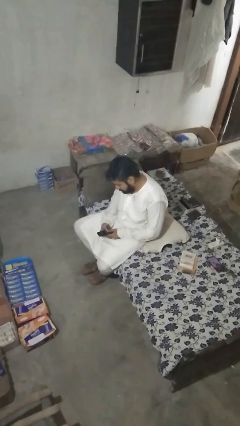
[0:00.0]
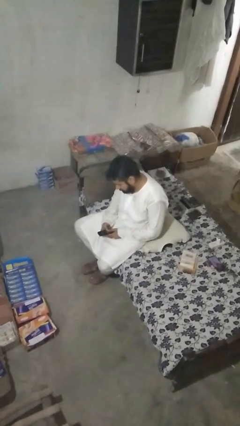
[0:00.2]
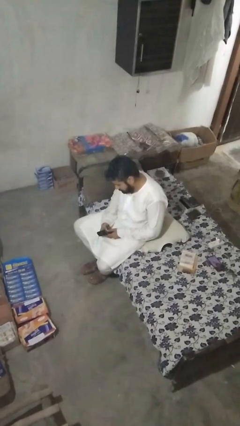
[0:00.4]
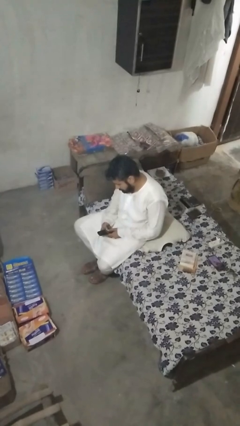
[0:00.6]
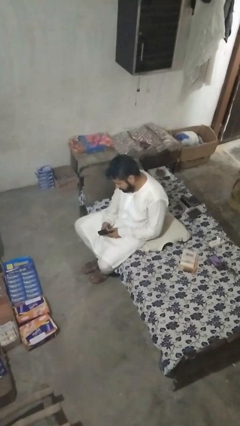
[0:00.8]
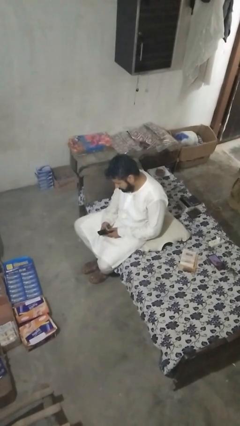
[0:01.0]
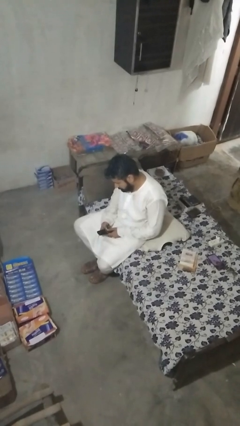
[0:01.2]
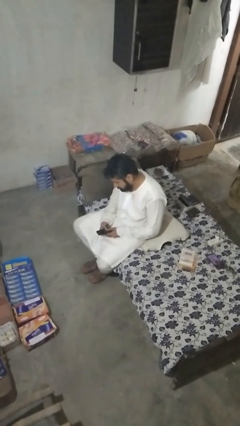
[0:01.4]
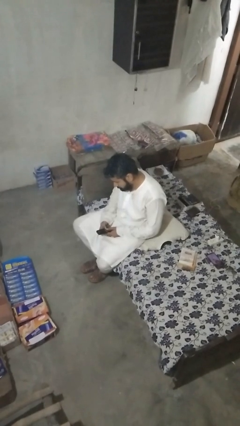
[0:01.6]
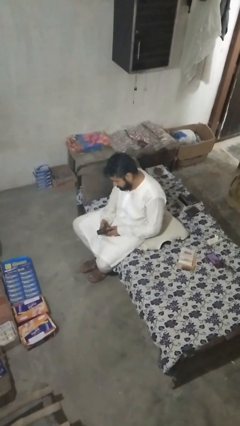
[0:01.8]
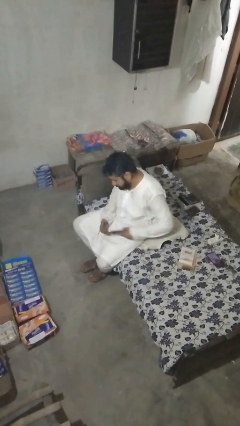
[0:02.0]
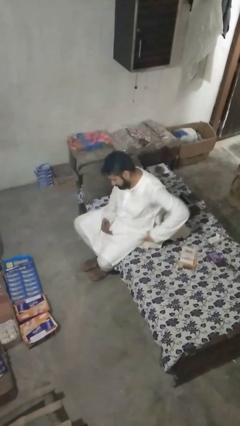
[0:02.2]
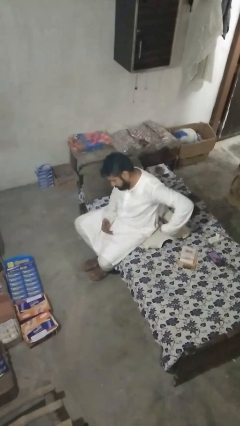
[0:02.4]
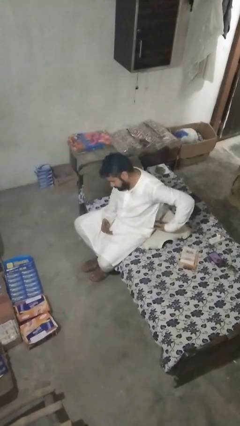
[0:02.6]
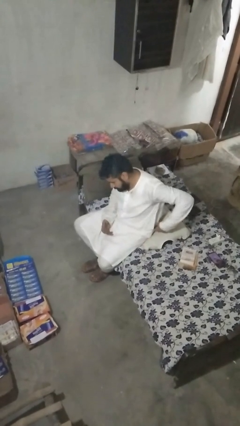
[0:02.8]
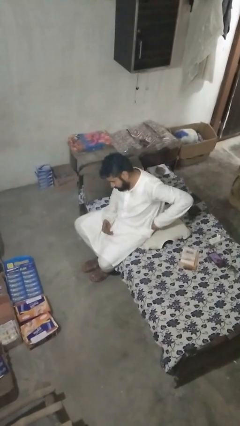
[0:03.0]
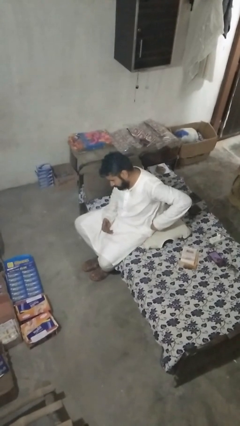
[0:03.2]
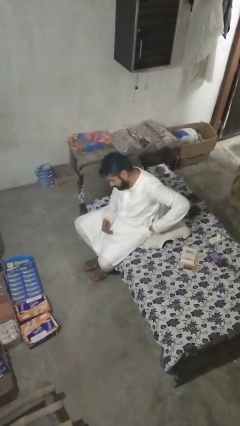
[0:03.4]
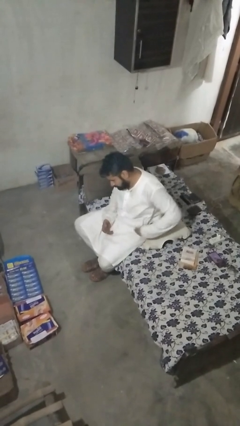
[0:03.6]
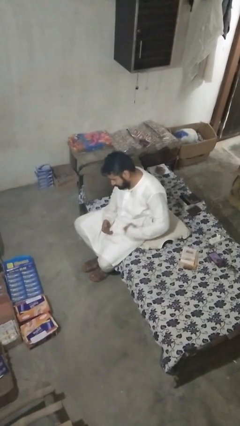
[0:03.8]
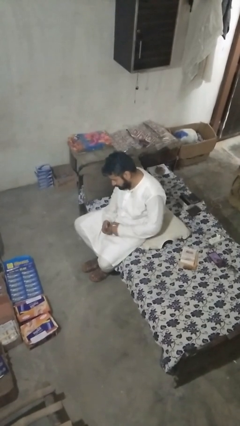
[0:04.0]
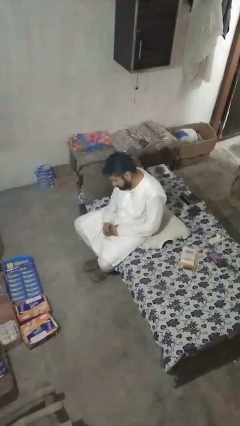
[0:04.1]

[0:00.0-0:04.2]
person puts phone into pocket

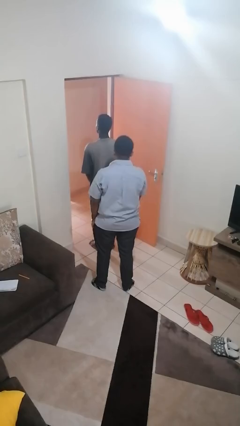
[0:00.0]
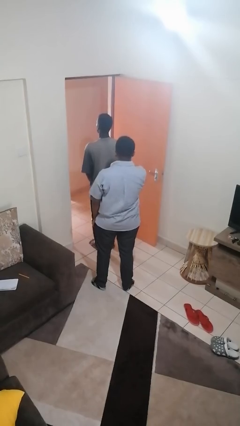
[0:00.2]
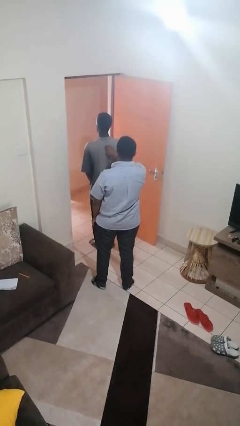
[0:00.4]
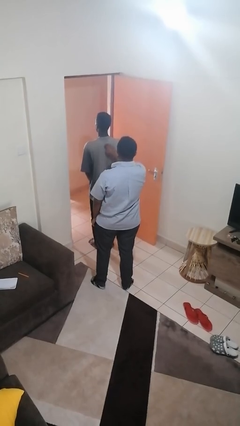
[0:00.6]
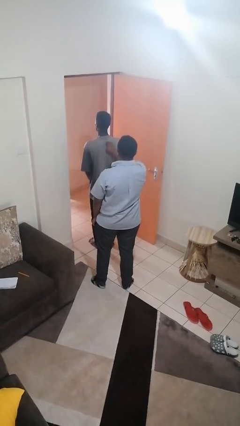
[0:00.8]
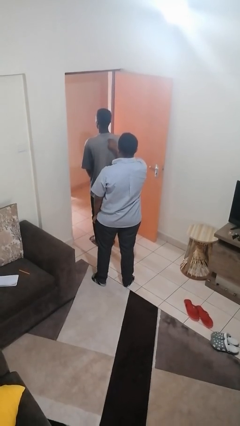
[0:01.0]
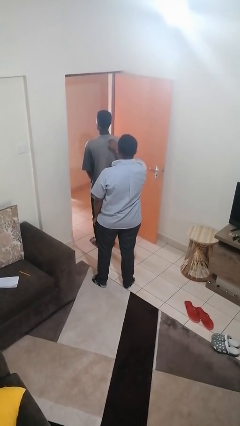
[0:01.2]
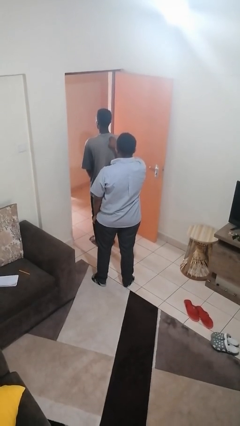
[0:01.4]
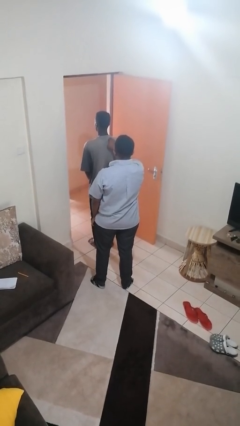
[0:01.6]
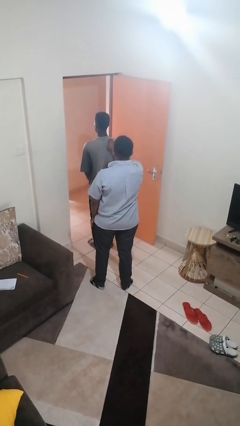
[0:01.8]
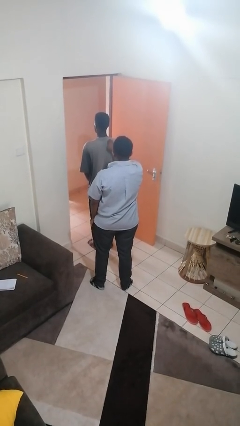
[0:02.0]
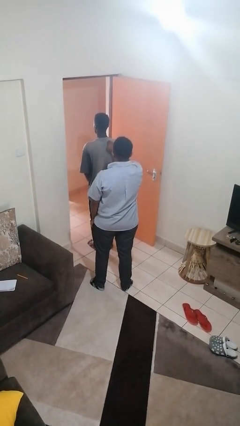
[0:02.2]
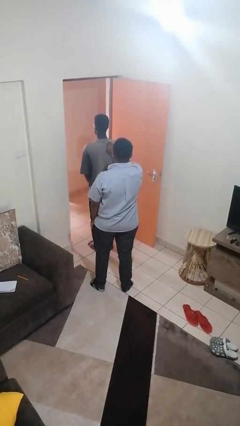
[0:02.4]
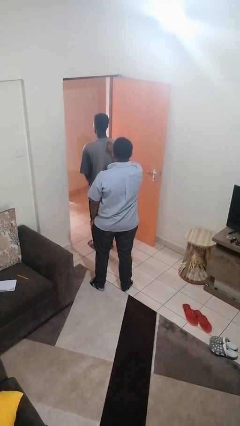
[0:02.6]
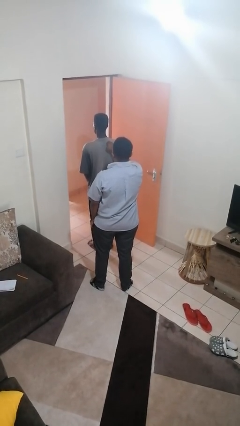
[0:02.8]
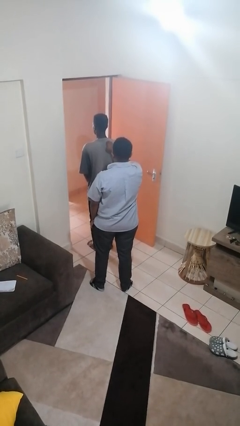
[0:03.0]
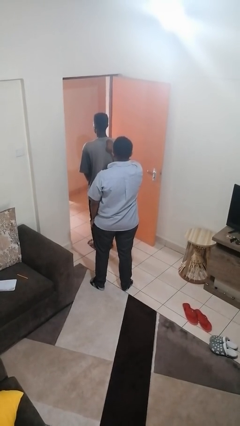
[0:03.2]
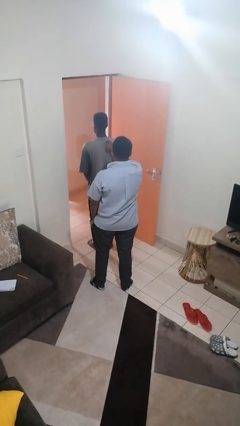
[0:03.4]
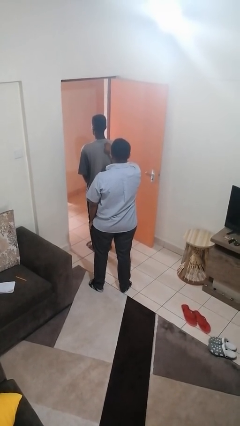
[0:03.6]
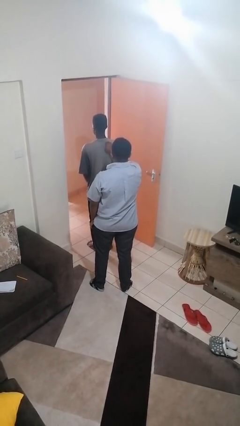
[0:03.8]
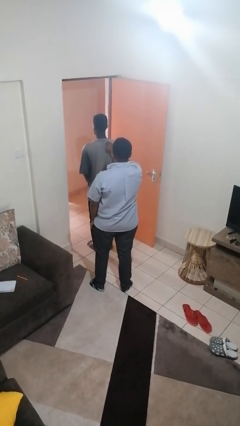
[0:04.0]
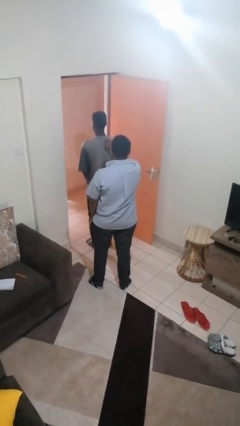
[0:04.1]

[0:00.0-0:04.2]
person touches back of person

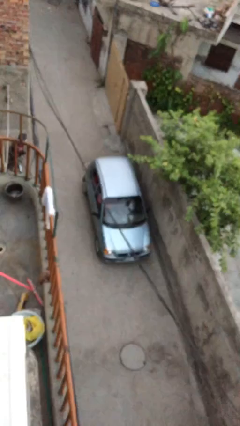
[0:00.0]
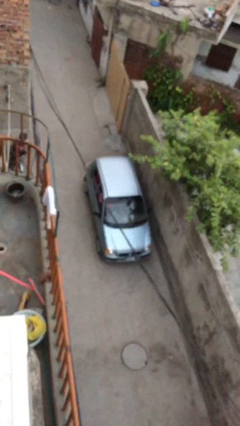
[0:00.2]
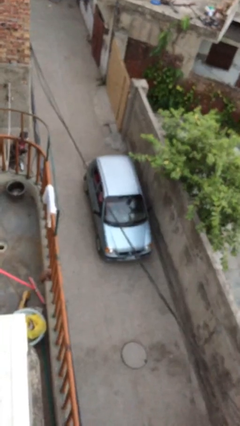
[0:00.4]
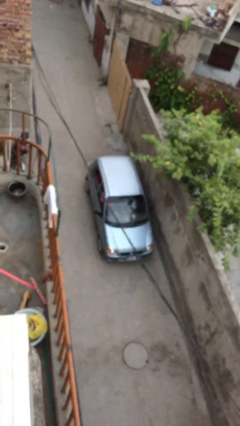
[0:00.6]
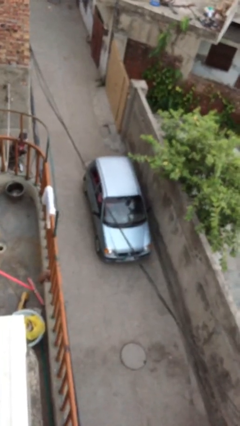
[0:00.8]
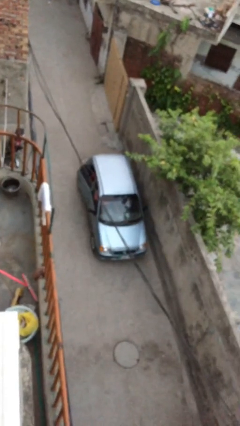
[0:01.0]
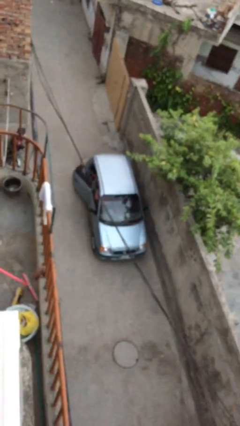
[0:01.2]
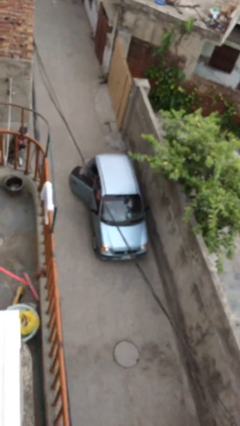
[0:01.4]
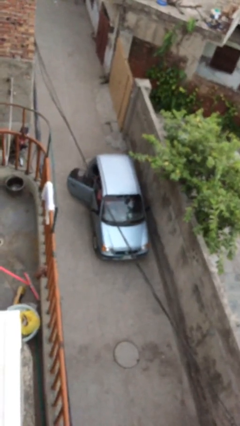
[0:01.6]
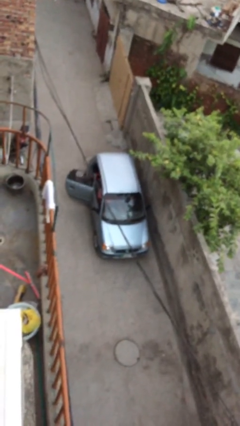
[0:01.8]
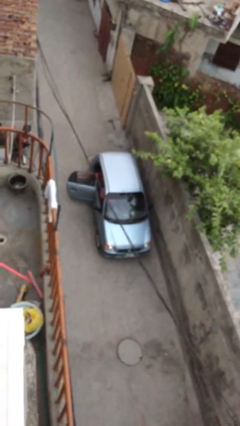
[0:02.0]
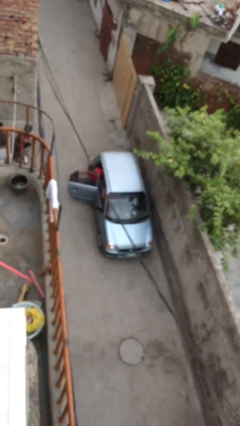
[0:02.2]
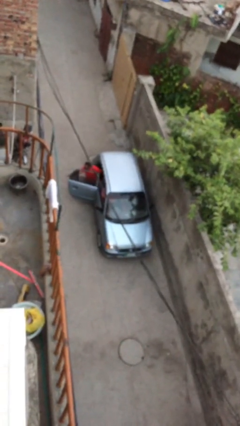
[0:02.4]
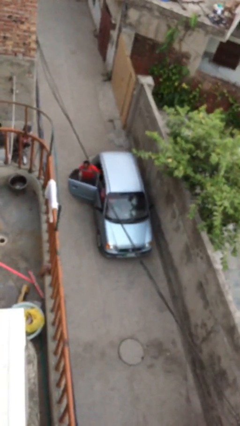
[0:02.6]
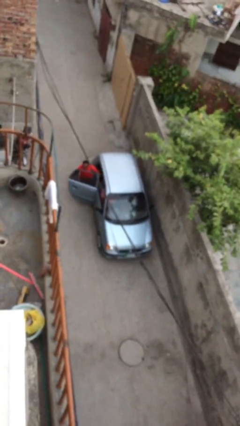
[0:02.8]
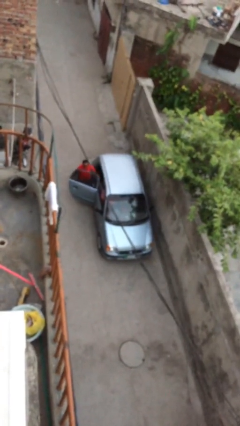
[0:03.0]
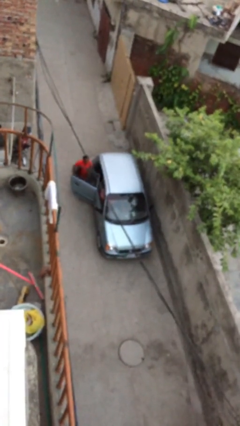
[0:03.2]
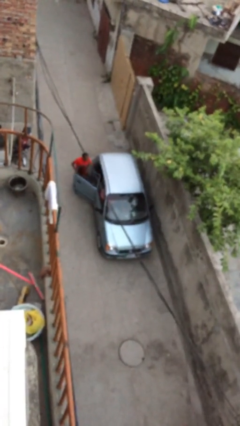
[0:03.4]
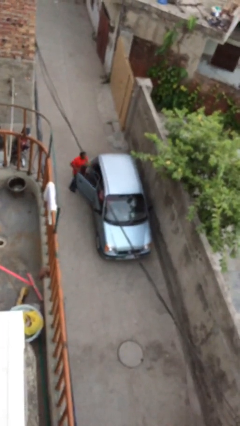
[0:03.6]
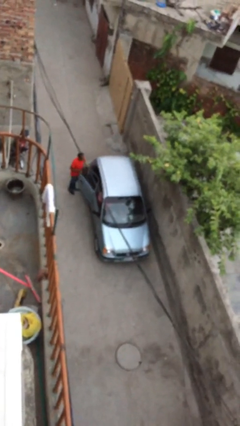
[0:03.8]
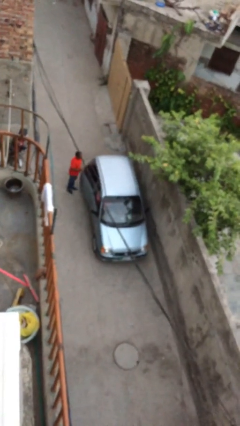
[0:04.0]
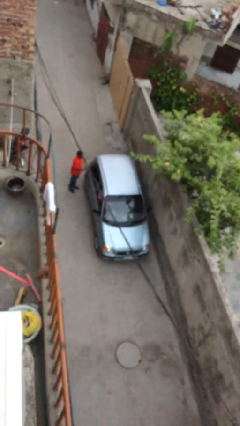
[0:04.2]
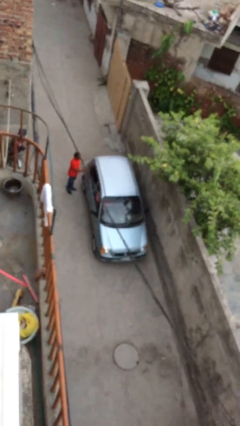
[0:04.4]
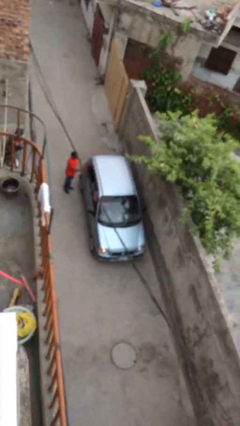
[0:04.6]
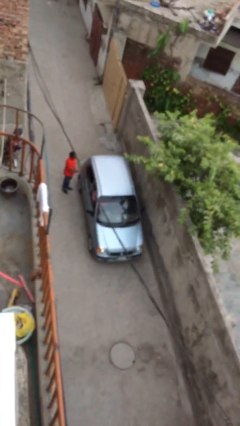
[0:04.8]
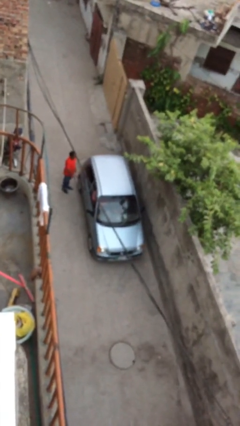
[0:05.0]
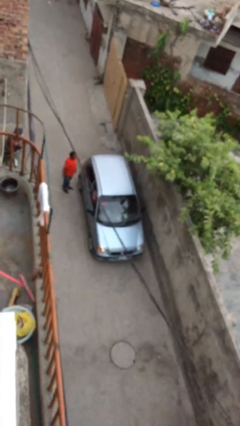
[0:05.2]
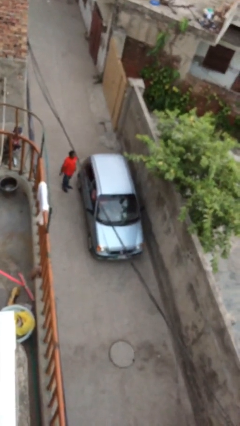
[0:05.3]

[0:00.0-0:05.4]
car drops off person

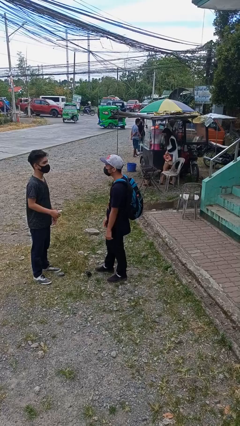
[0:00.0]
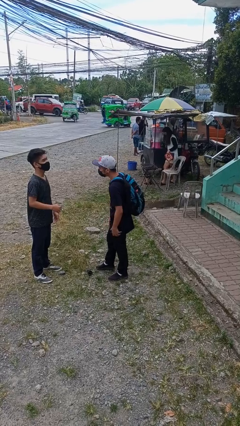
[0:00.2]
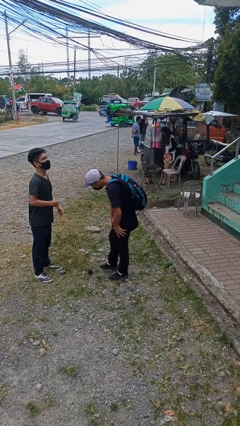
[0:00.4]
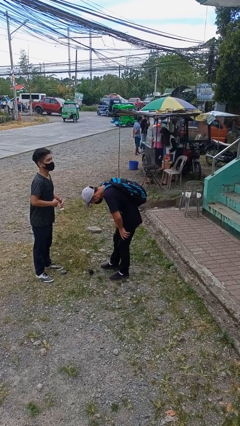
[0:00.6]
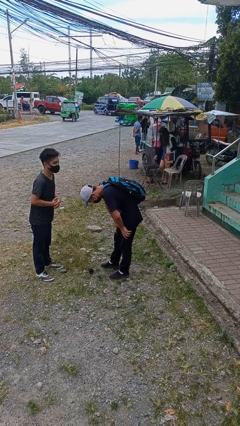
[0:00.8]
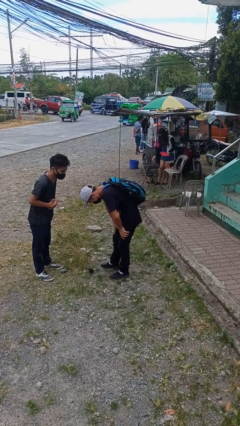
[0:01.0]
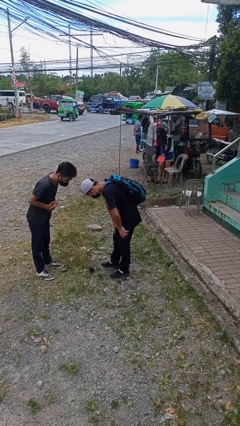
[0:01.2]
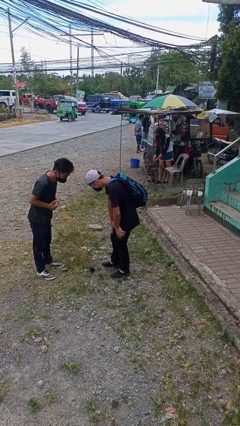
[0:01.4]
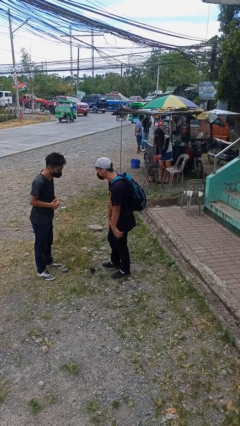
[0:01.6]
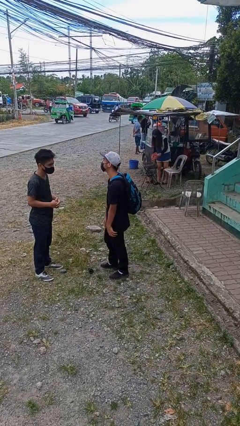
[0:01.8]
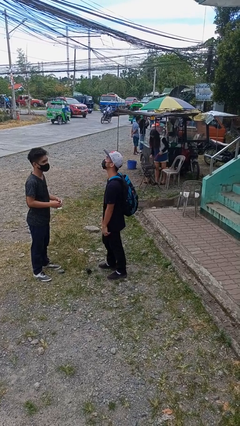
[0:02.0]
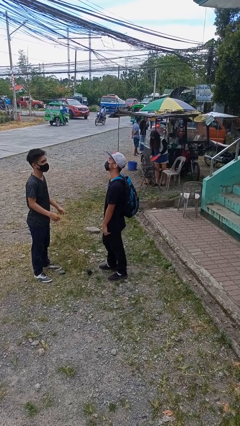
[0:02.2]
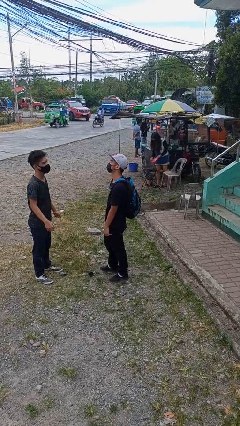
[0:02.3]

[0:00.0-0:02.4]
person laughs with person

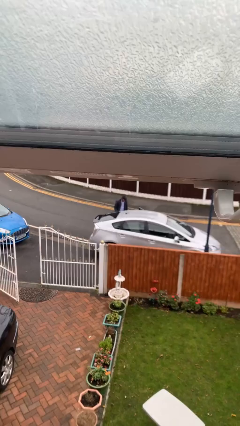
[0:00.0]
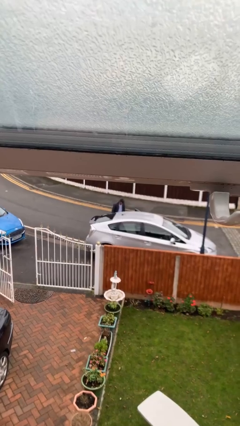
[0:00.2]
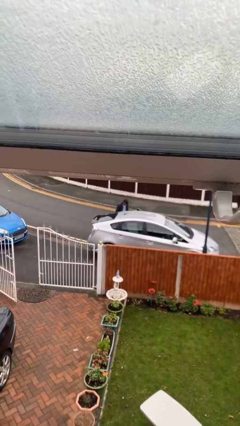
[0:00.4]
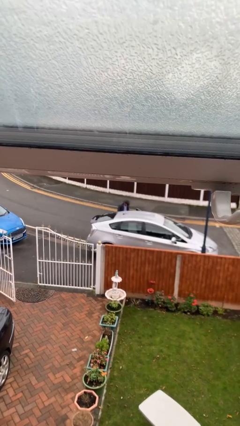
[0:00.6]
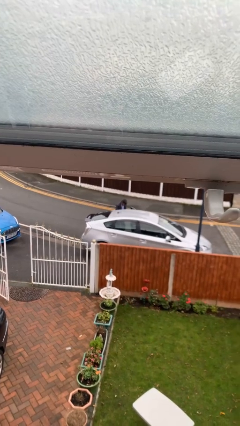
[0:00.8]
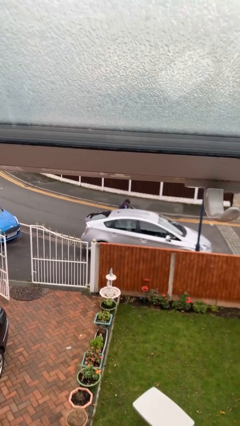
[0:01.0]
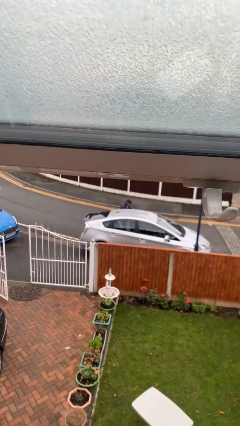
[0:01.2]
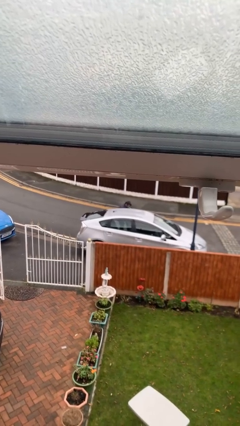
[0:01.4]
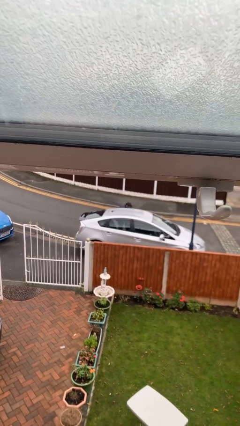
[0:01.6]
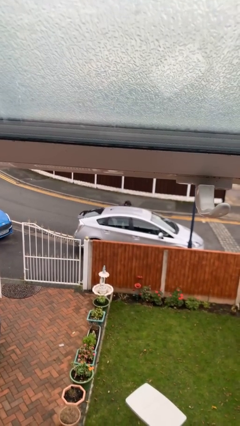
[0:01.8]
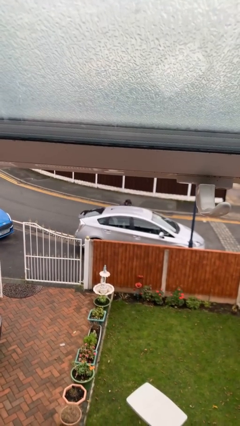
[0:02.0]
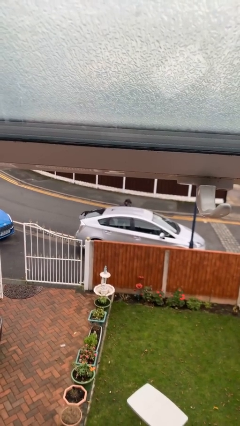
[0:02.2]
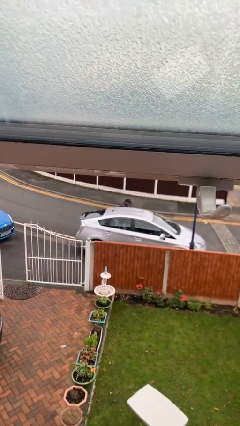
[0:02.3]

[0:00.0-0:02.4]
person unloads car
